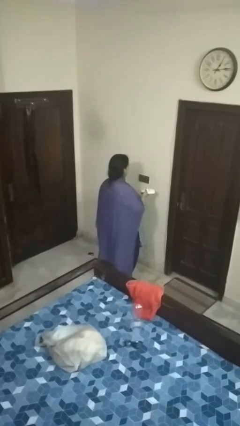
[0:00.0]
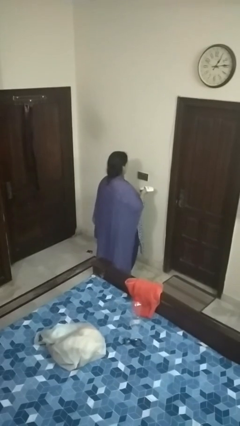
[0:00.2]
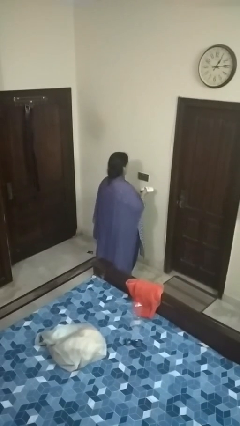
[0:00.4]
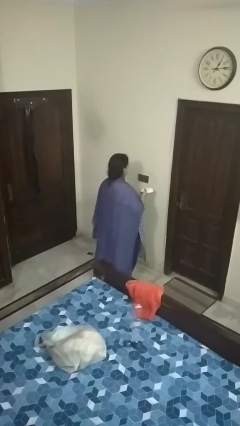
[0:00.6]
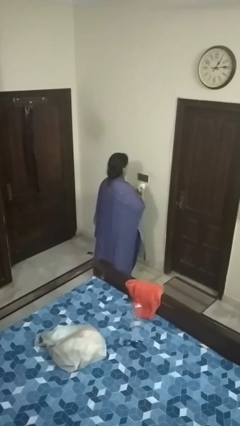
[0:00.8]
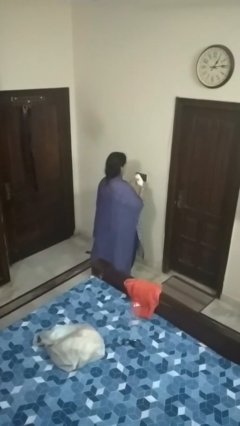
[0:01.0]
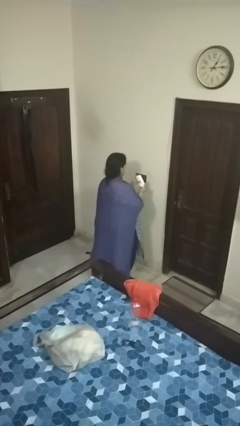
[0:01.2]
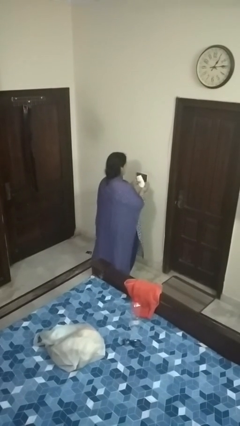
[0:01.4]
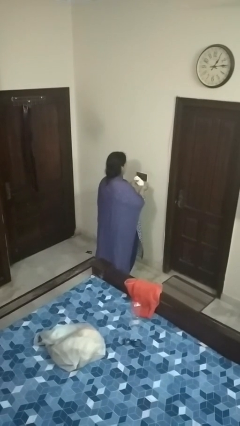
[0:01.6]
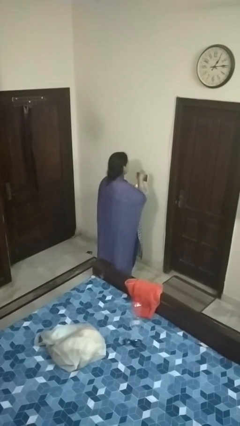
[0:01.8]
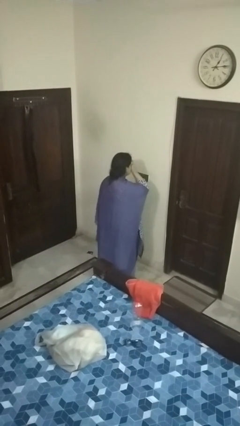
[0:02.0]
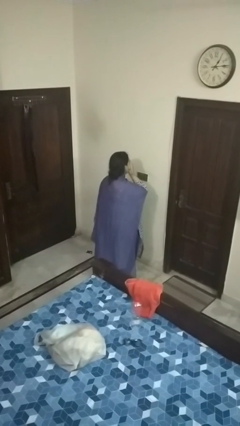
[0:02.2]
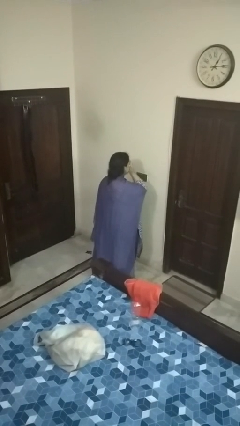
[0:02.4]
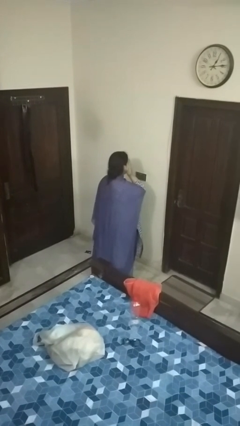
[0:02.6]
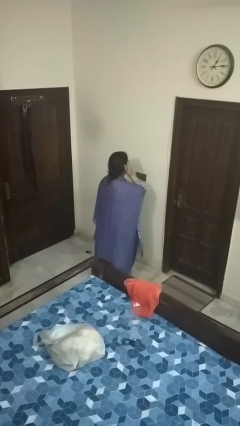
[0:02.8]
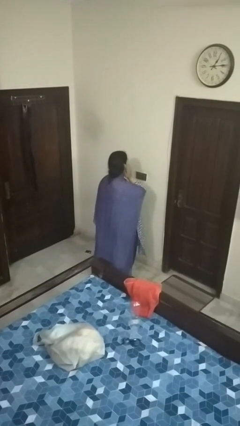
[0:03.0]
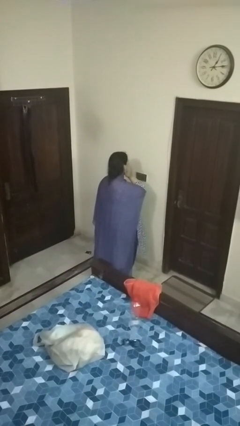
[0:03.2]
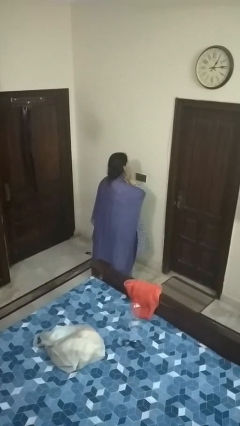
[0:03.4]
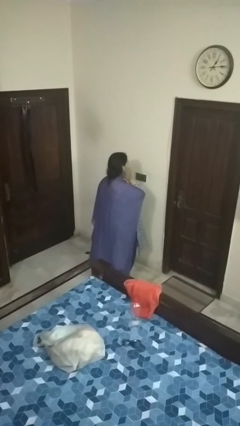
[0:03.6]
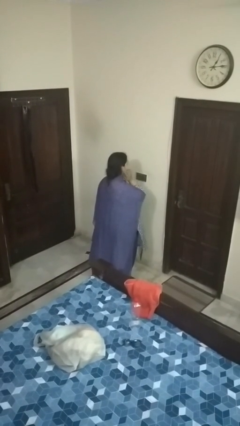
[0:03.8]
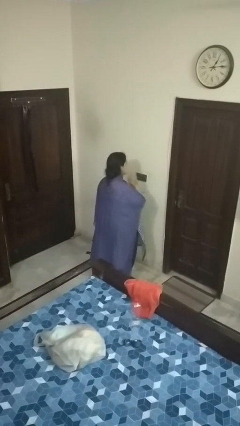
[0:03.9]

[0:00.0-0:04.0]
person applies facial moisturizer

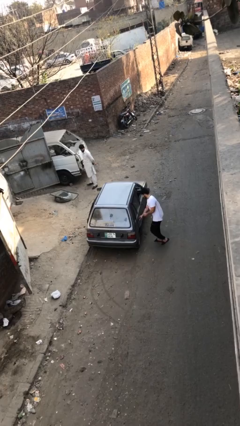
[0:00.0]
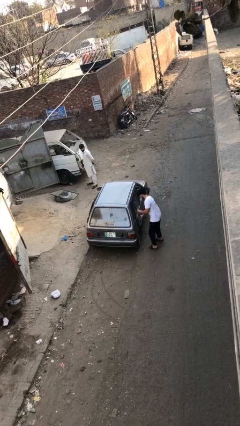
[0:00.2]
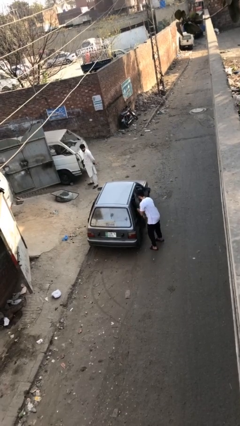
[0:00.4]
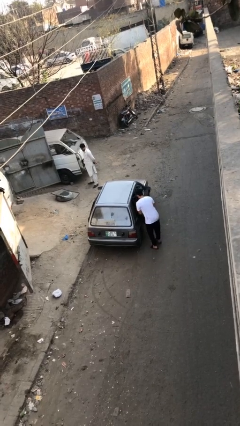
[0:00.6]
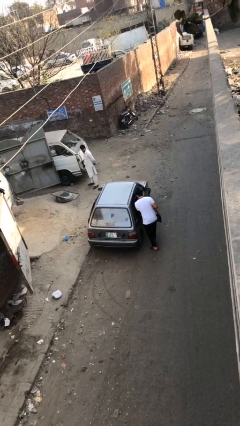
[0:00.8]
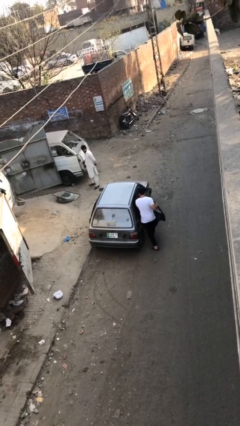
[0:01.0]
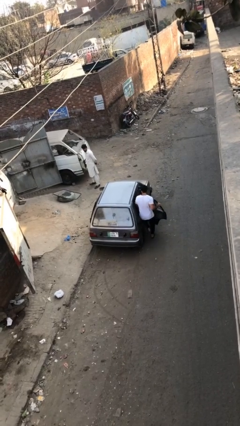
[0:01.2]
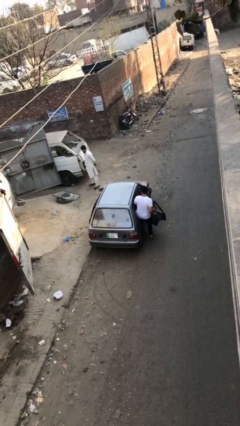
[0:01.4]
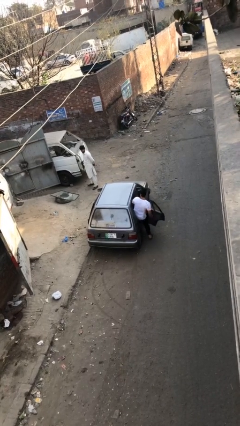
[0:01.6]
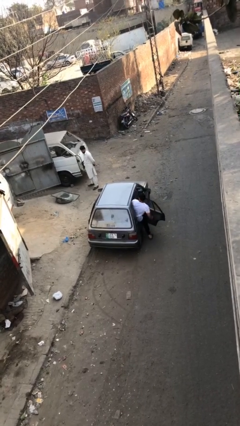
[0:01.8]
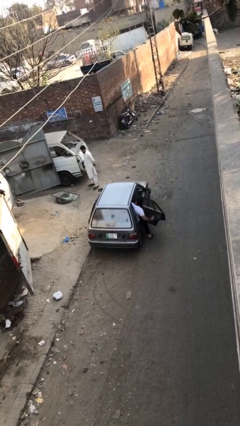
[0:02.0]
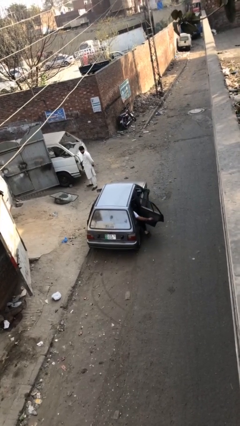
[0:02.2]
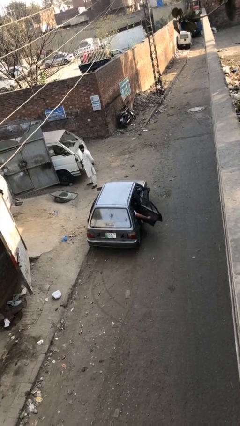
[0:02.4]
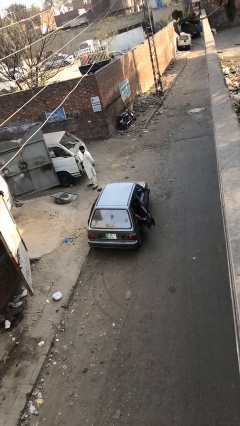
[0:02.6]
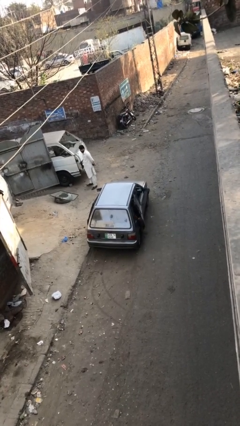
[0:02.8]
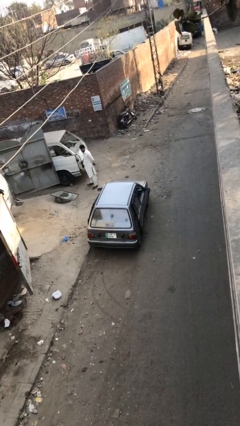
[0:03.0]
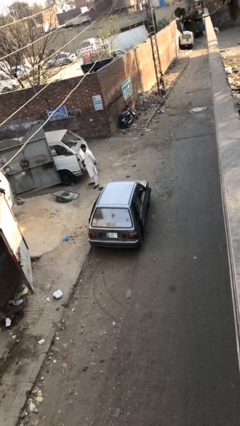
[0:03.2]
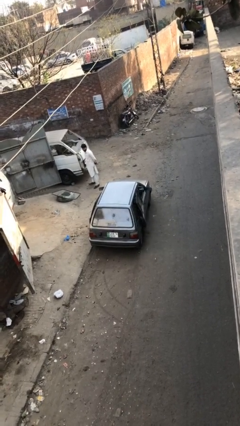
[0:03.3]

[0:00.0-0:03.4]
car picks up person

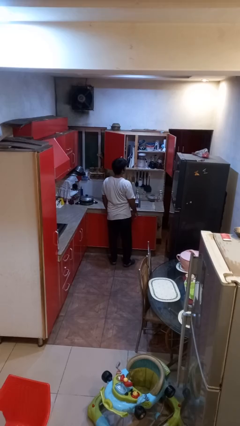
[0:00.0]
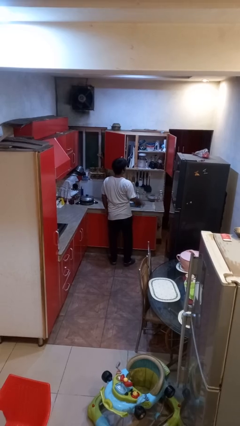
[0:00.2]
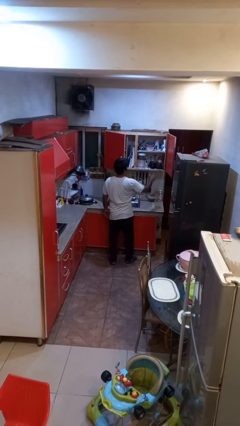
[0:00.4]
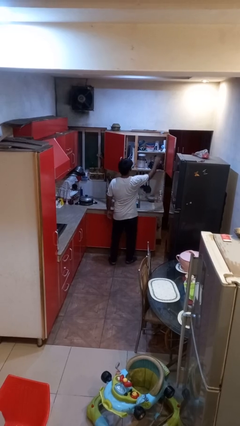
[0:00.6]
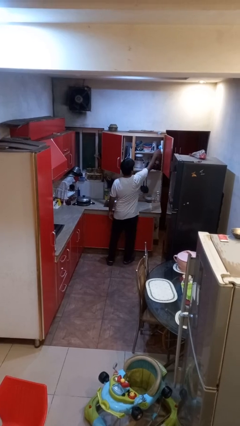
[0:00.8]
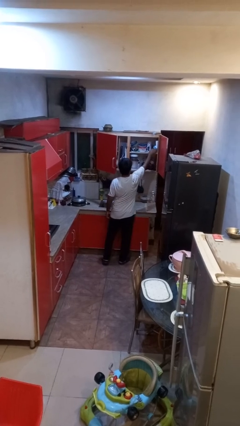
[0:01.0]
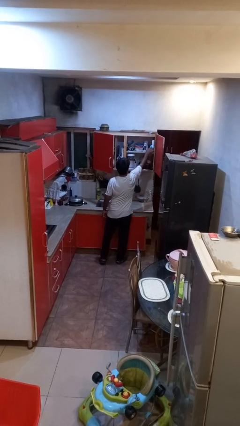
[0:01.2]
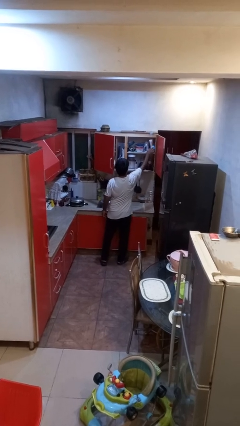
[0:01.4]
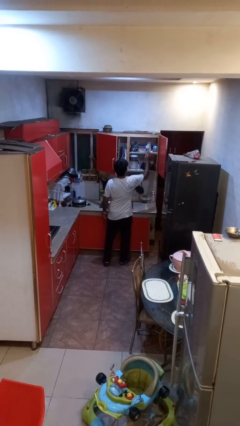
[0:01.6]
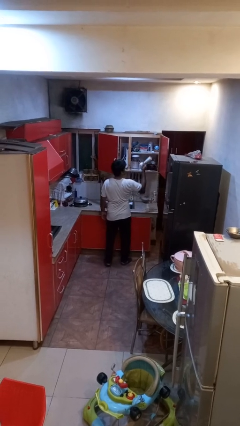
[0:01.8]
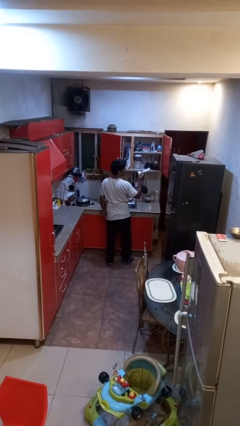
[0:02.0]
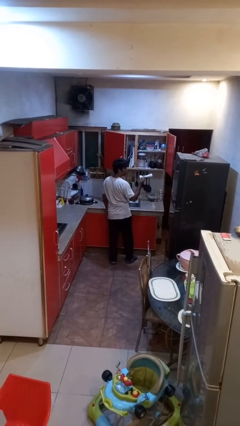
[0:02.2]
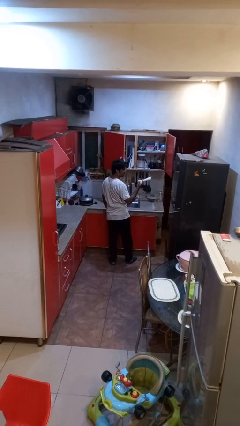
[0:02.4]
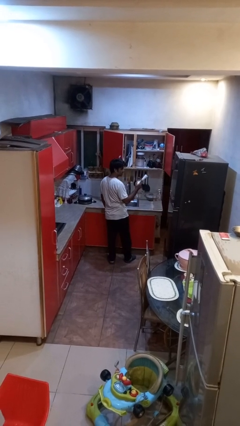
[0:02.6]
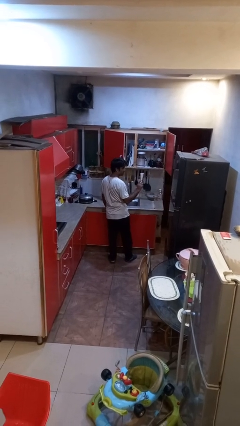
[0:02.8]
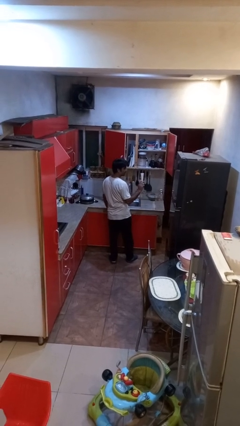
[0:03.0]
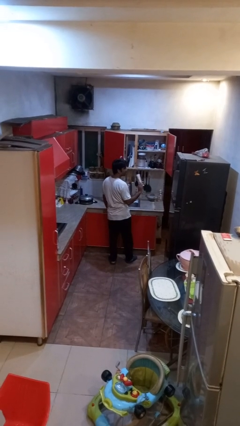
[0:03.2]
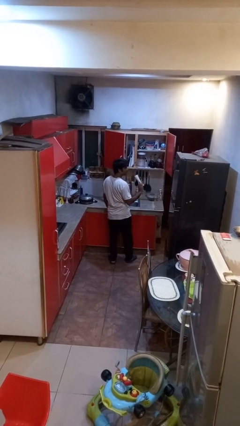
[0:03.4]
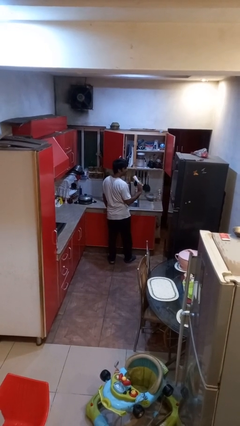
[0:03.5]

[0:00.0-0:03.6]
person picks up object from cabinet

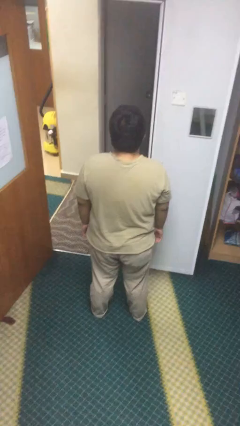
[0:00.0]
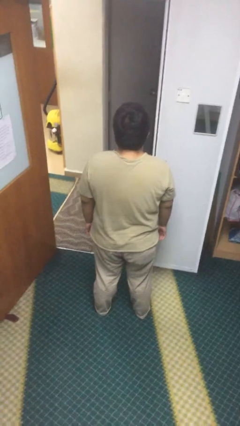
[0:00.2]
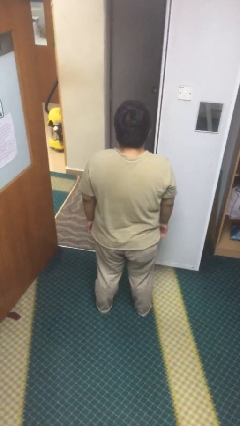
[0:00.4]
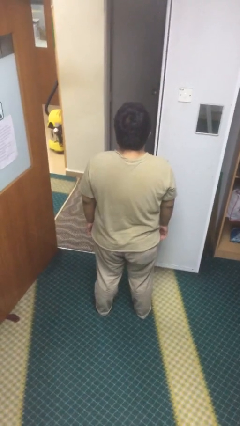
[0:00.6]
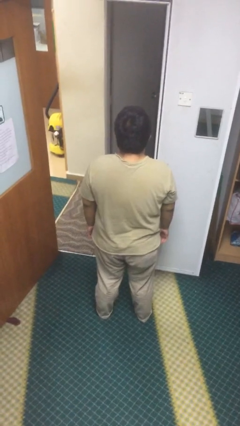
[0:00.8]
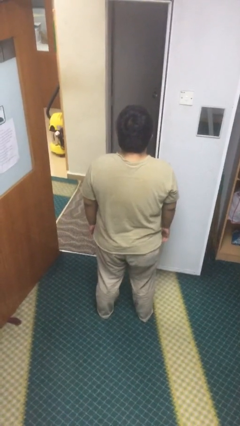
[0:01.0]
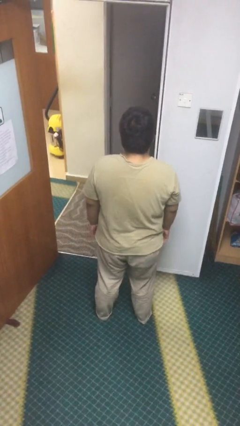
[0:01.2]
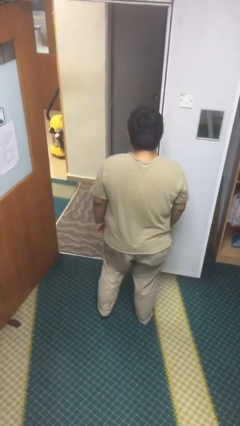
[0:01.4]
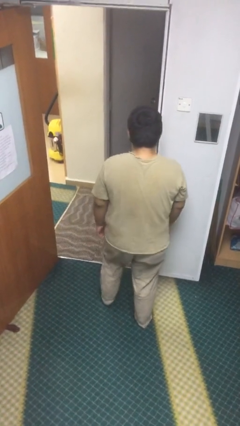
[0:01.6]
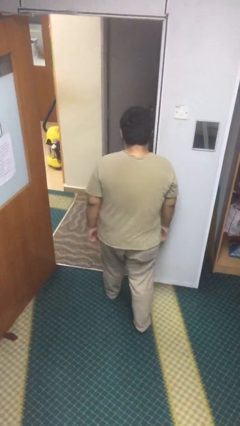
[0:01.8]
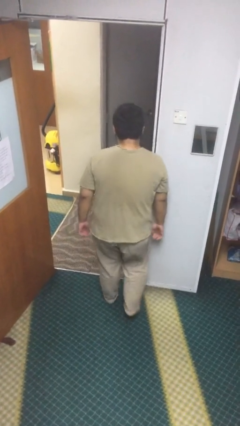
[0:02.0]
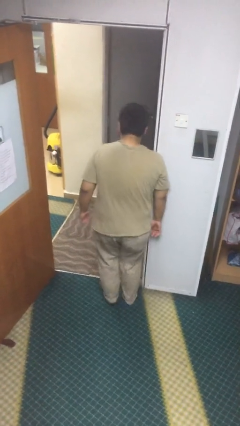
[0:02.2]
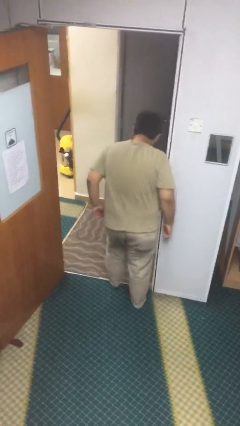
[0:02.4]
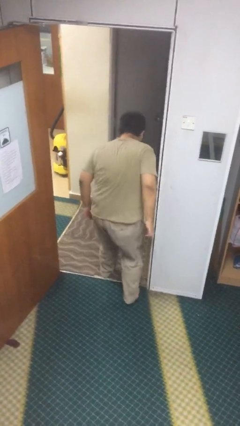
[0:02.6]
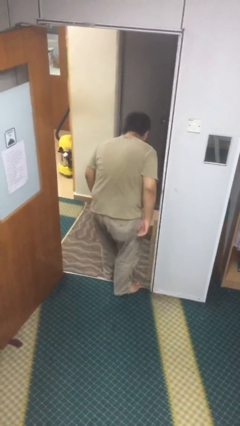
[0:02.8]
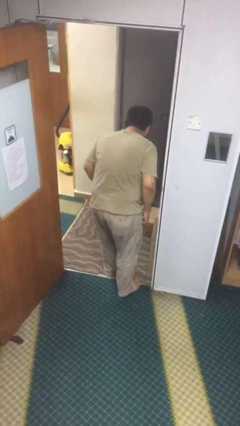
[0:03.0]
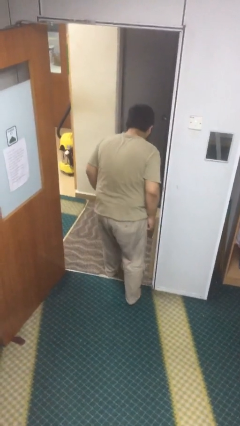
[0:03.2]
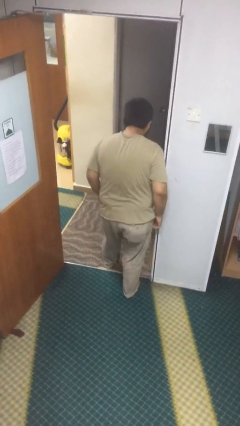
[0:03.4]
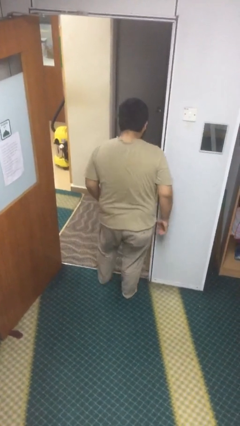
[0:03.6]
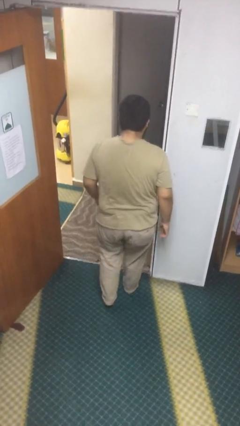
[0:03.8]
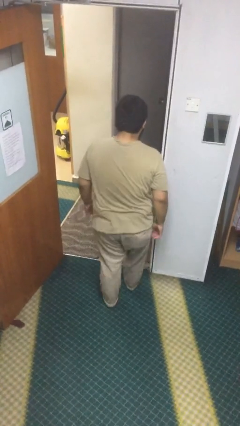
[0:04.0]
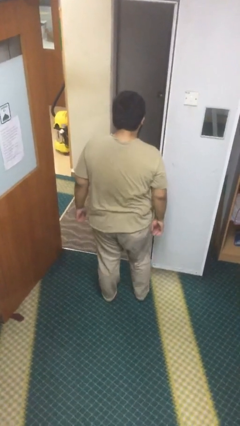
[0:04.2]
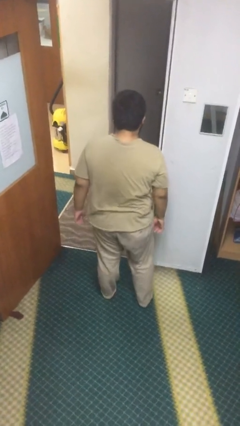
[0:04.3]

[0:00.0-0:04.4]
person bumps into wall

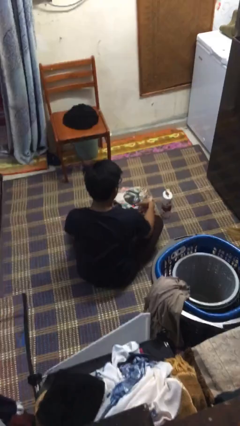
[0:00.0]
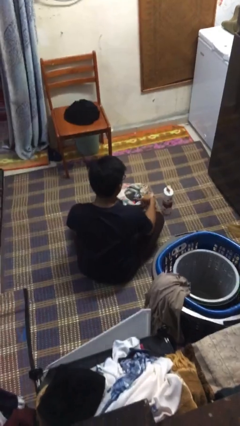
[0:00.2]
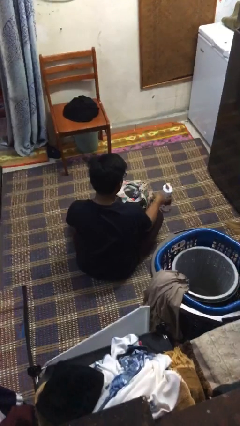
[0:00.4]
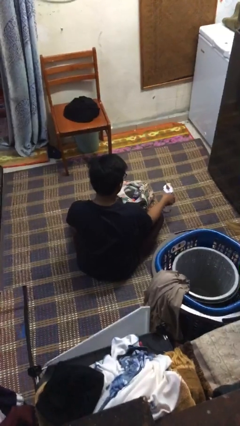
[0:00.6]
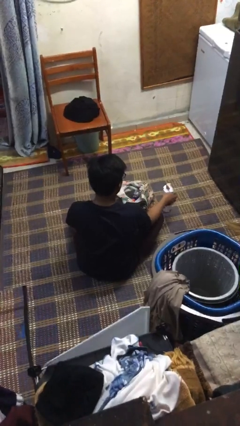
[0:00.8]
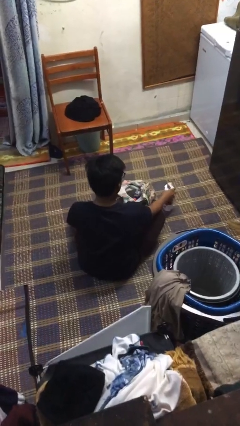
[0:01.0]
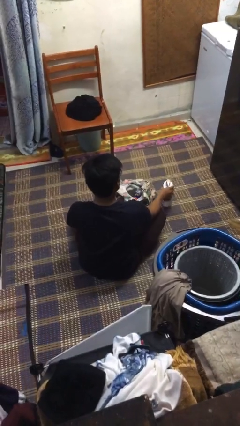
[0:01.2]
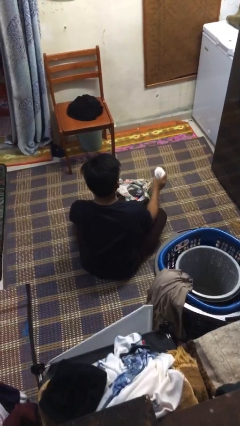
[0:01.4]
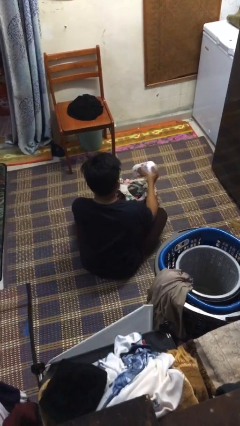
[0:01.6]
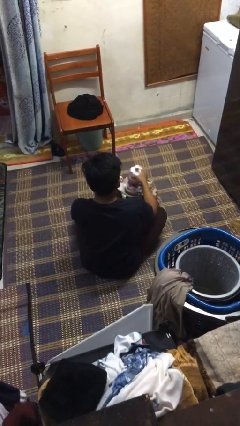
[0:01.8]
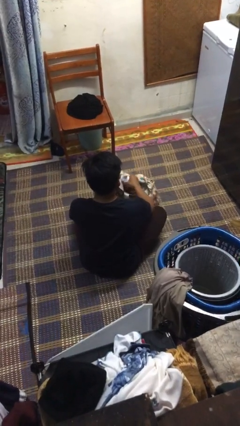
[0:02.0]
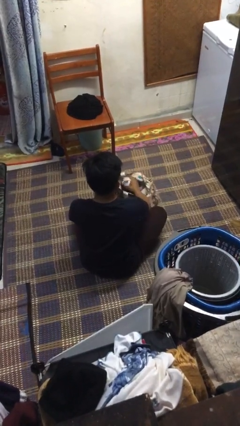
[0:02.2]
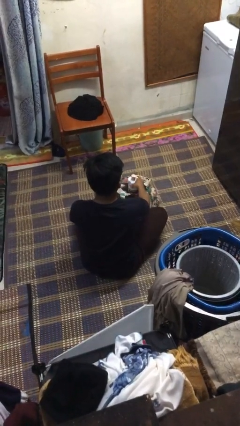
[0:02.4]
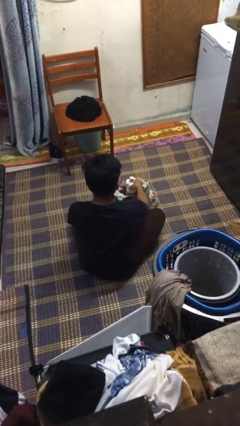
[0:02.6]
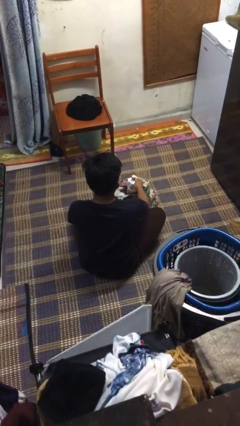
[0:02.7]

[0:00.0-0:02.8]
person puts object into bag
